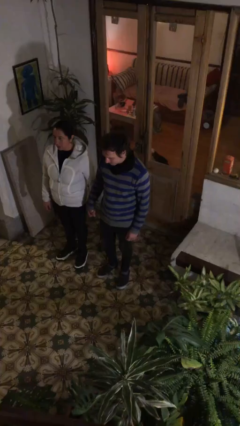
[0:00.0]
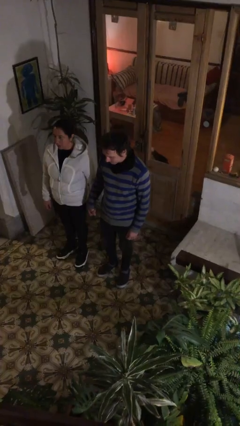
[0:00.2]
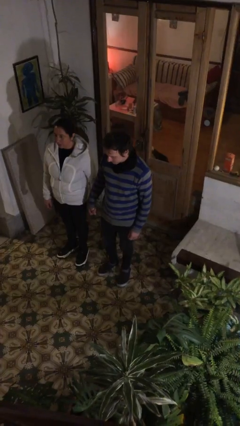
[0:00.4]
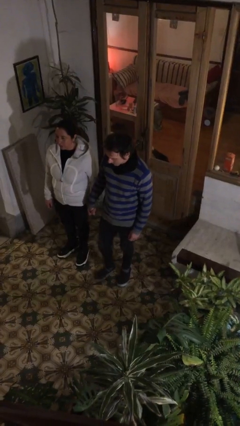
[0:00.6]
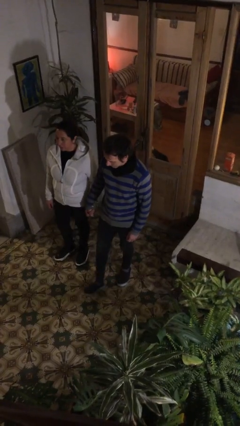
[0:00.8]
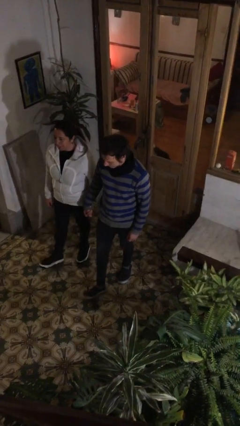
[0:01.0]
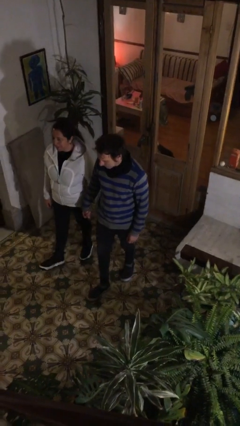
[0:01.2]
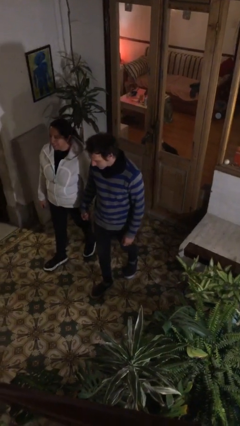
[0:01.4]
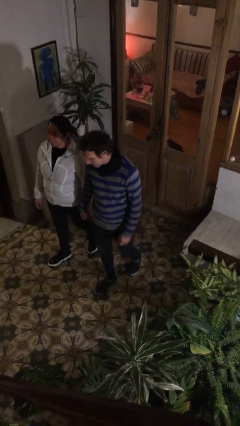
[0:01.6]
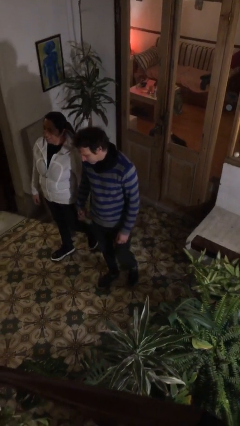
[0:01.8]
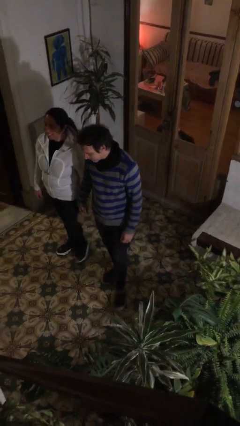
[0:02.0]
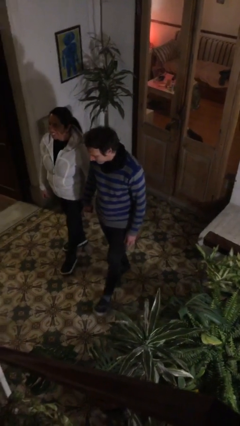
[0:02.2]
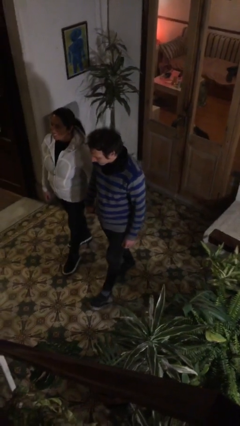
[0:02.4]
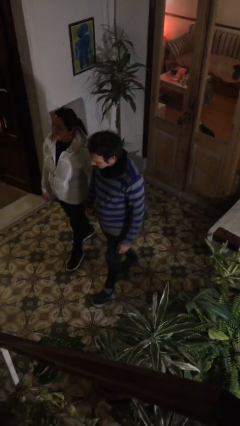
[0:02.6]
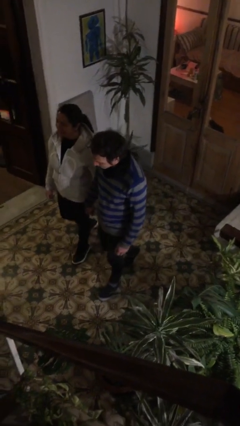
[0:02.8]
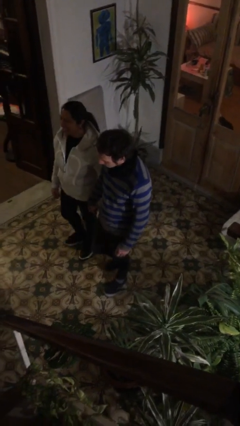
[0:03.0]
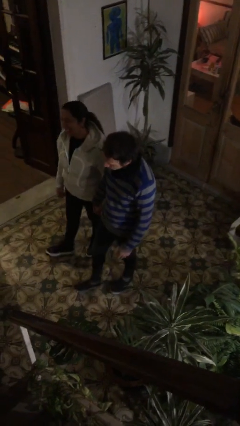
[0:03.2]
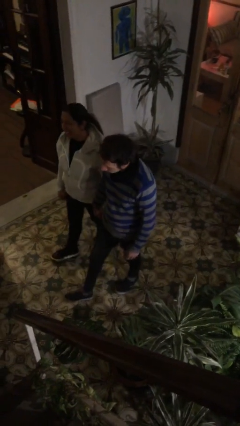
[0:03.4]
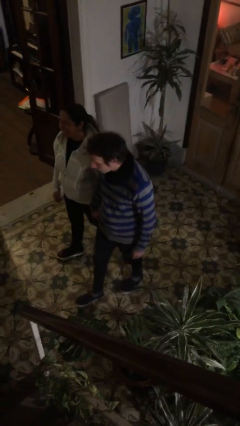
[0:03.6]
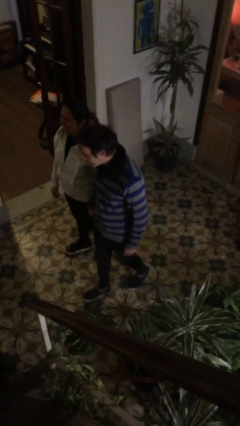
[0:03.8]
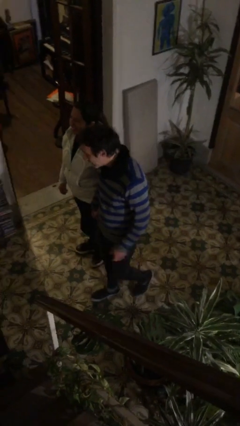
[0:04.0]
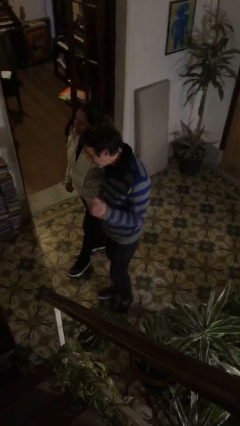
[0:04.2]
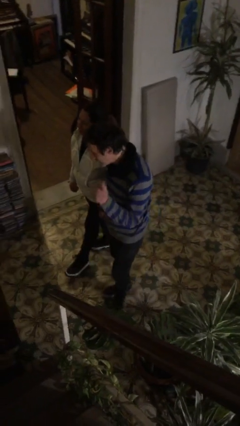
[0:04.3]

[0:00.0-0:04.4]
person holds hand

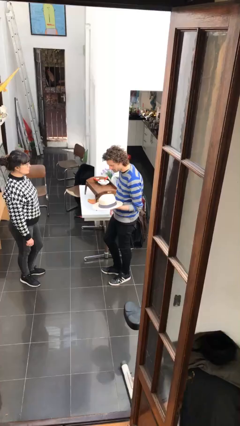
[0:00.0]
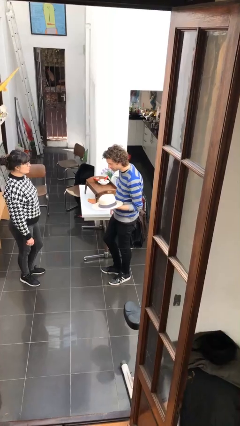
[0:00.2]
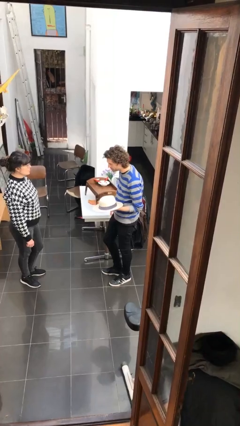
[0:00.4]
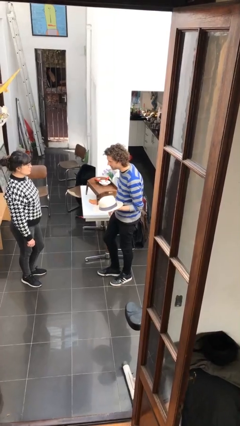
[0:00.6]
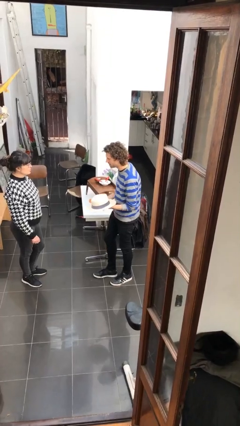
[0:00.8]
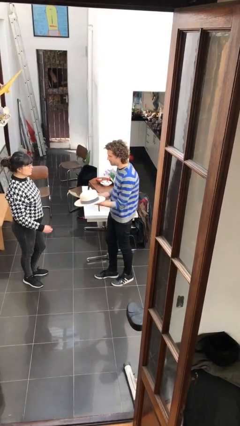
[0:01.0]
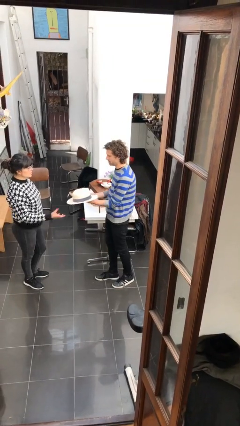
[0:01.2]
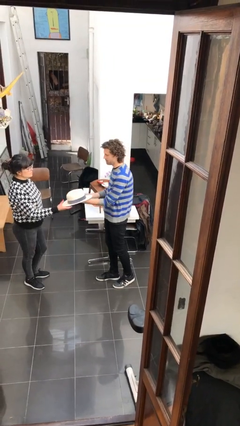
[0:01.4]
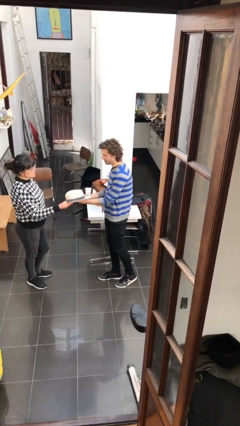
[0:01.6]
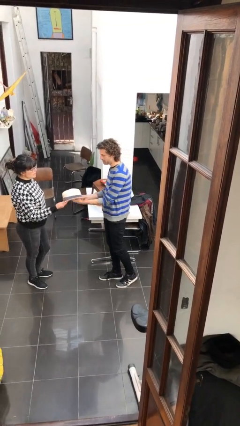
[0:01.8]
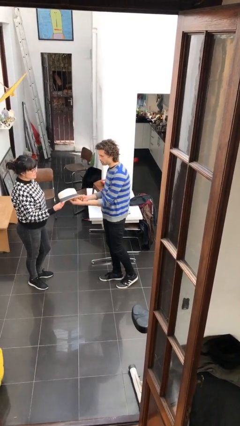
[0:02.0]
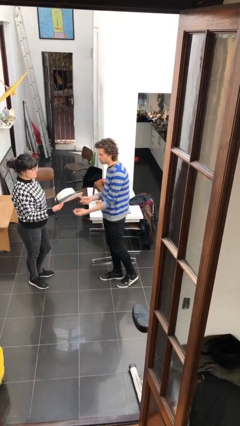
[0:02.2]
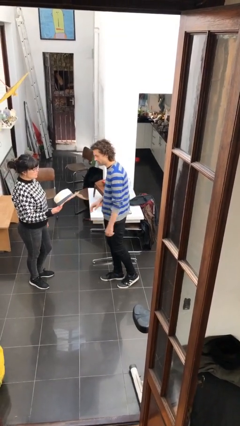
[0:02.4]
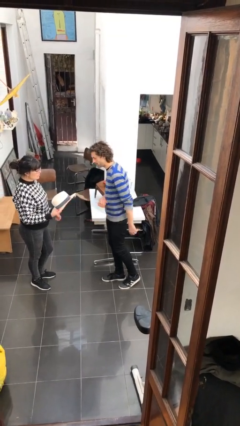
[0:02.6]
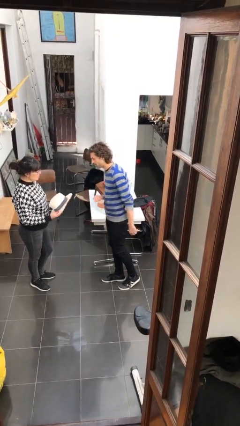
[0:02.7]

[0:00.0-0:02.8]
person transfers object to person

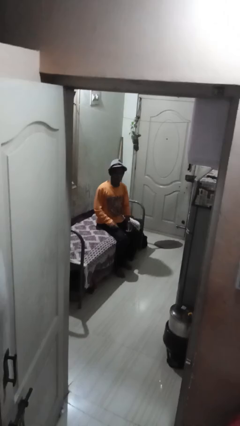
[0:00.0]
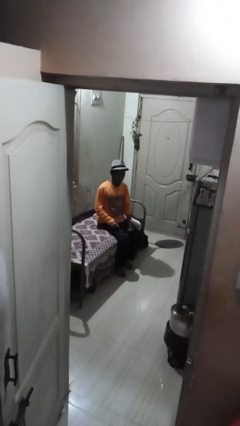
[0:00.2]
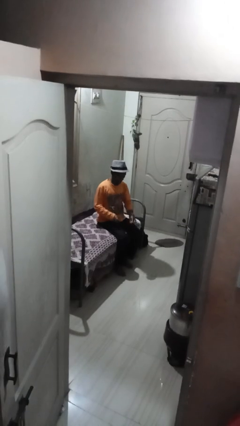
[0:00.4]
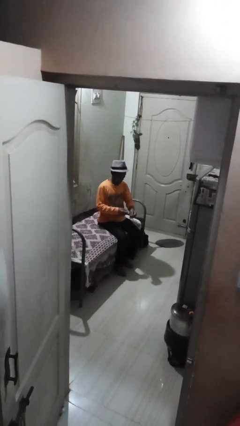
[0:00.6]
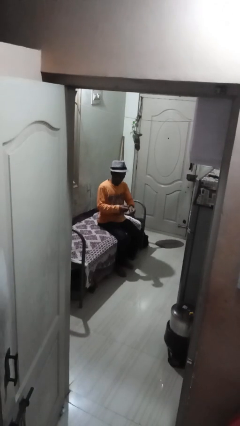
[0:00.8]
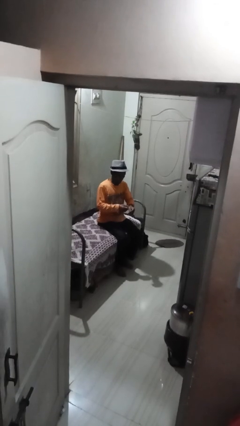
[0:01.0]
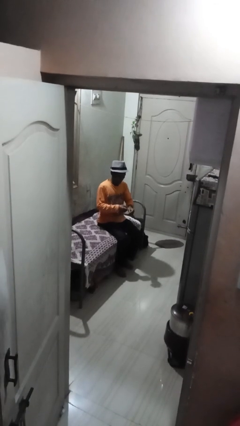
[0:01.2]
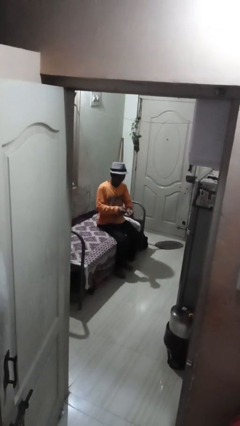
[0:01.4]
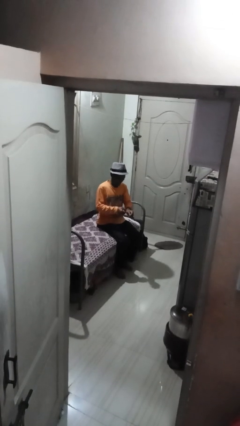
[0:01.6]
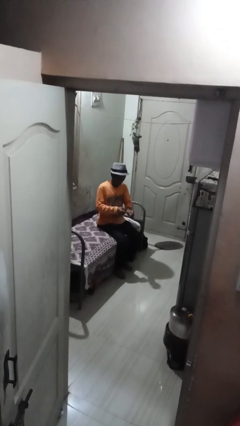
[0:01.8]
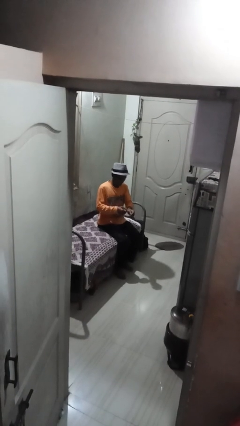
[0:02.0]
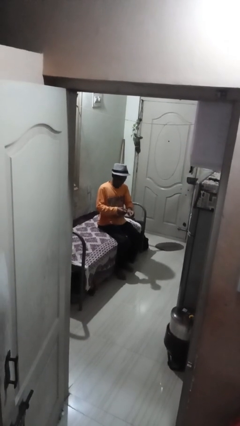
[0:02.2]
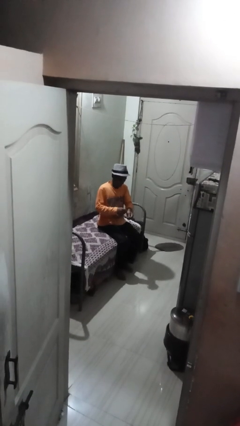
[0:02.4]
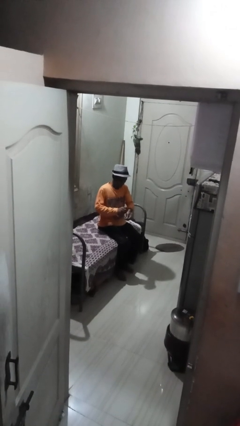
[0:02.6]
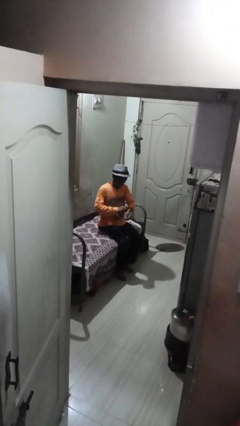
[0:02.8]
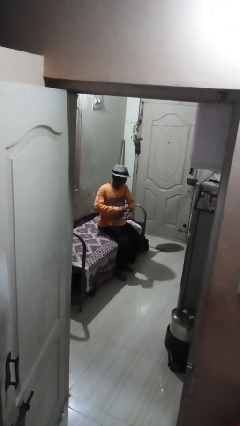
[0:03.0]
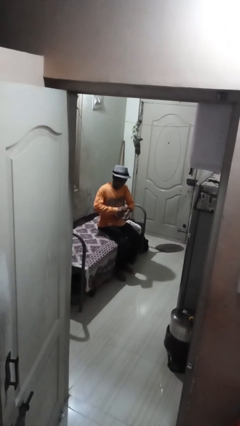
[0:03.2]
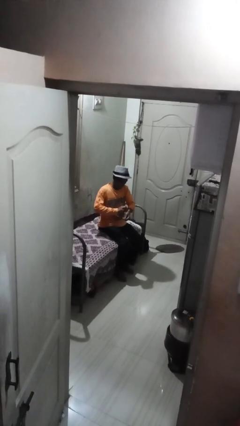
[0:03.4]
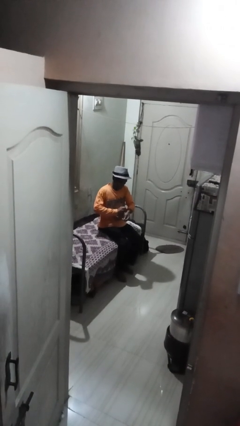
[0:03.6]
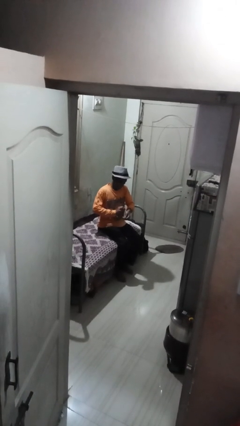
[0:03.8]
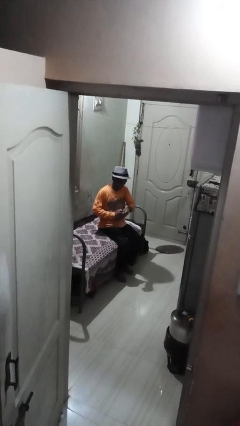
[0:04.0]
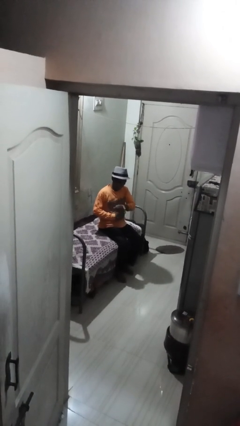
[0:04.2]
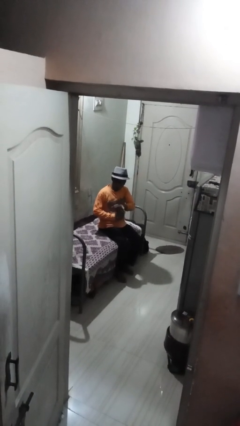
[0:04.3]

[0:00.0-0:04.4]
person takes off wristwatch

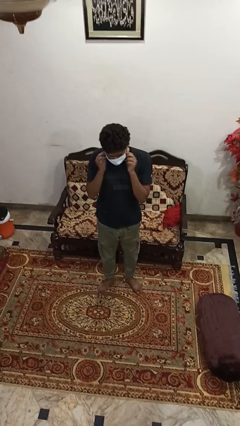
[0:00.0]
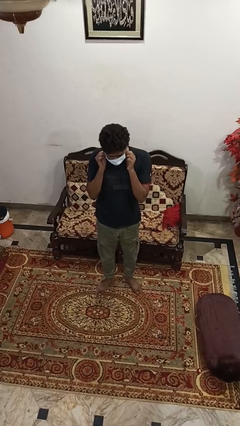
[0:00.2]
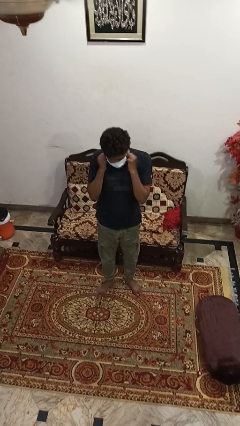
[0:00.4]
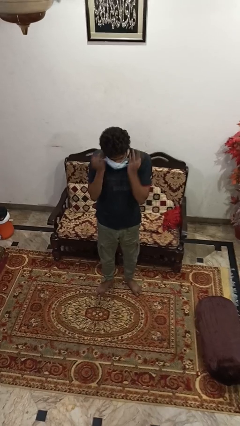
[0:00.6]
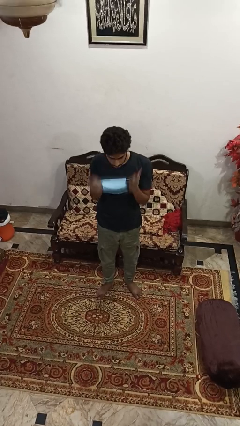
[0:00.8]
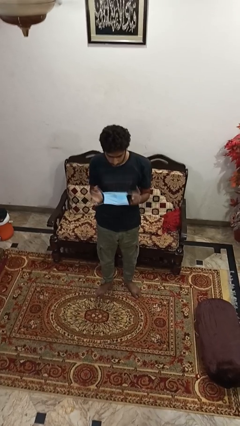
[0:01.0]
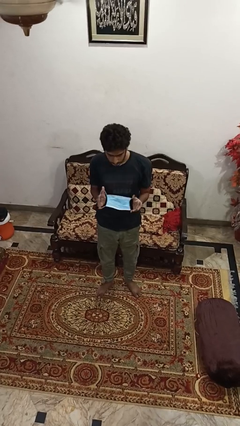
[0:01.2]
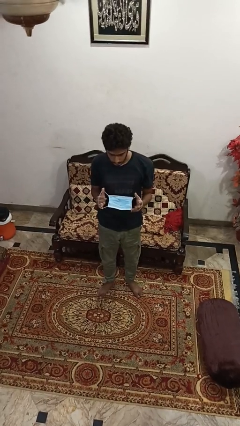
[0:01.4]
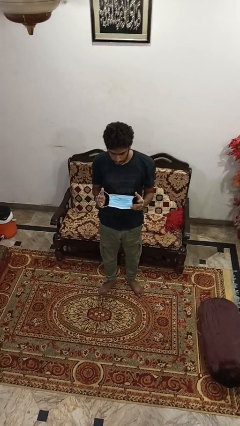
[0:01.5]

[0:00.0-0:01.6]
person takes off facemask

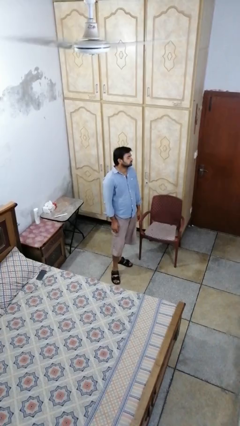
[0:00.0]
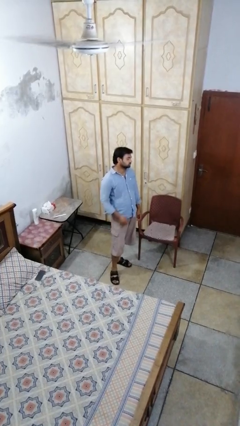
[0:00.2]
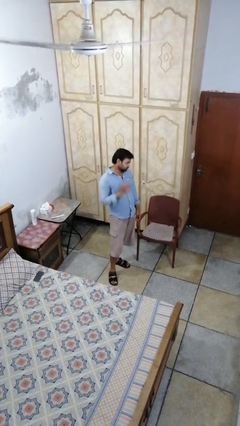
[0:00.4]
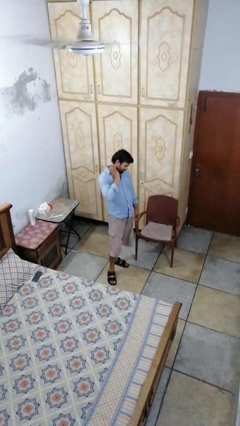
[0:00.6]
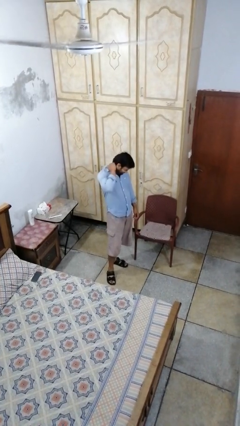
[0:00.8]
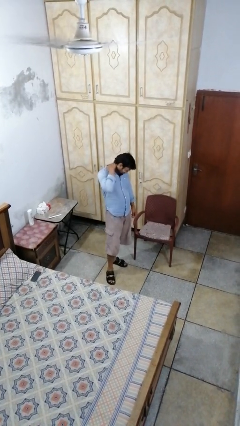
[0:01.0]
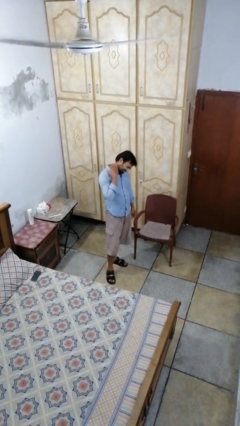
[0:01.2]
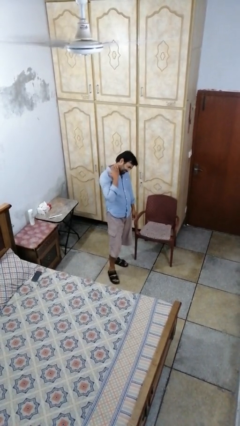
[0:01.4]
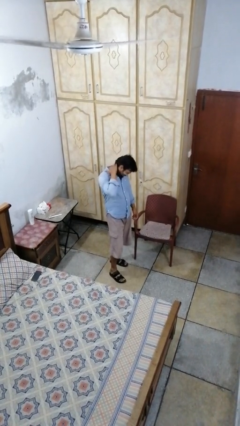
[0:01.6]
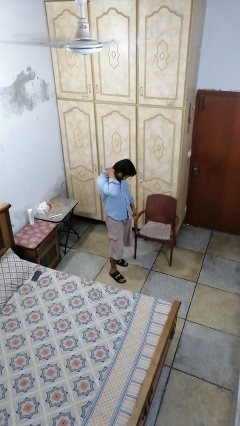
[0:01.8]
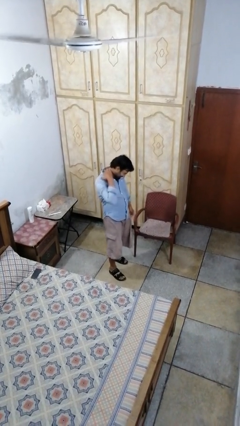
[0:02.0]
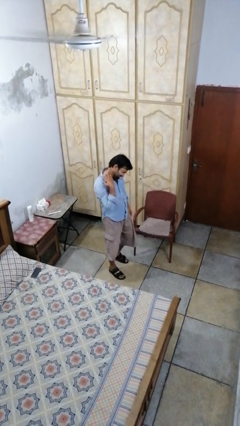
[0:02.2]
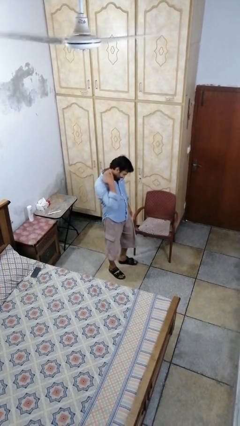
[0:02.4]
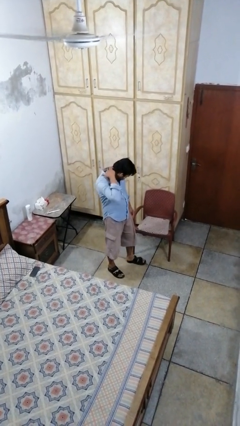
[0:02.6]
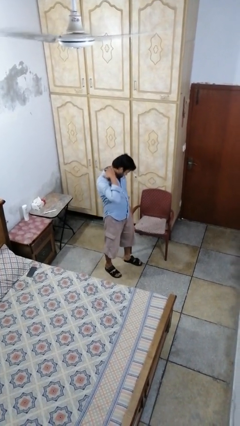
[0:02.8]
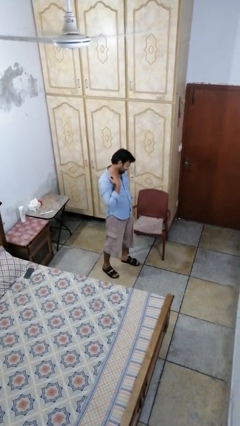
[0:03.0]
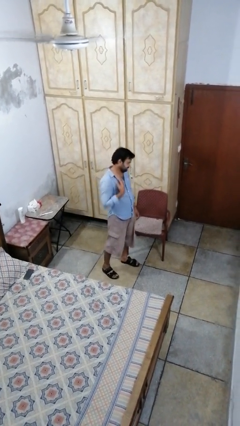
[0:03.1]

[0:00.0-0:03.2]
person rubs neck

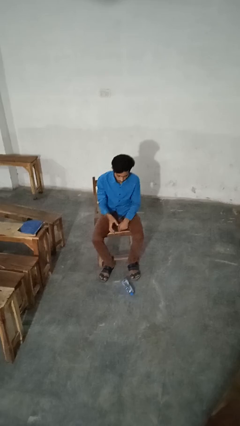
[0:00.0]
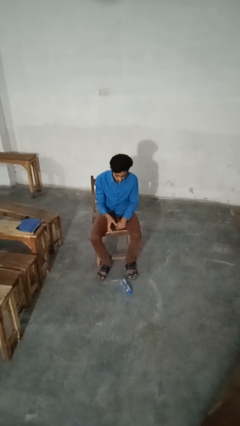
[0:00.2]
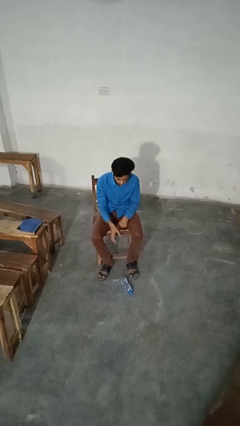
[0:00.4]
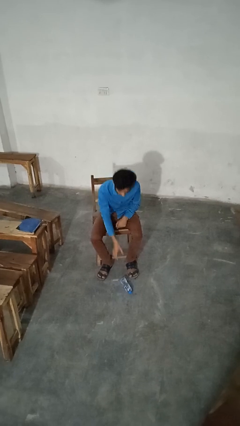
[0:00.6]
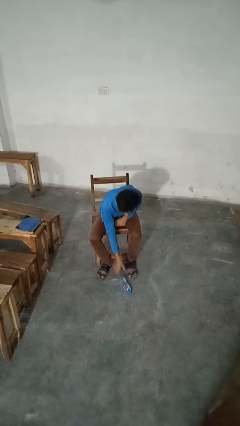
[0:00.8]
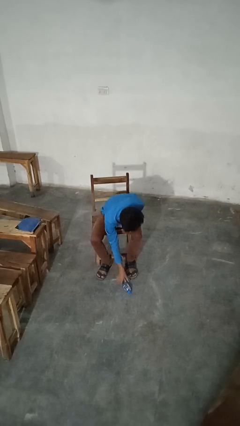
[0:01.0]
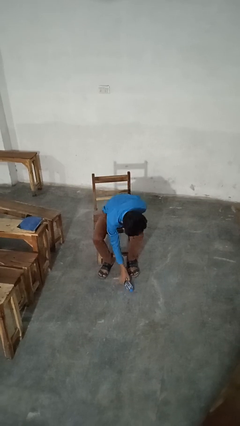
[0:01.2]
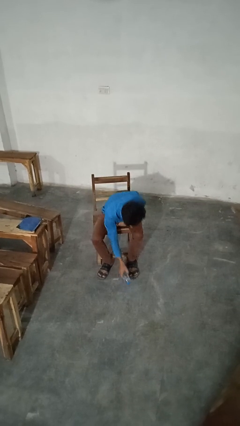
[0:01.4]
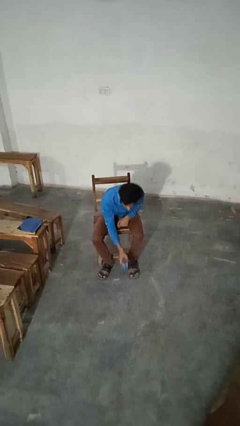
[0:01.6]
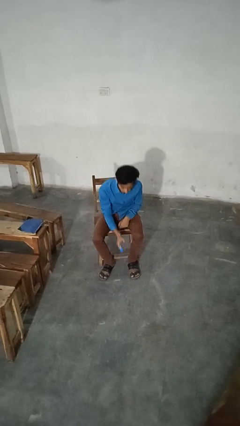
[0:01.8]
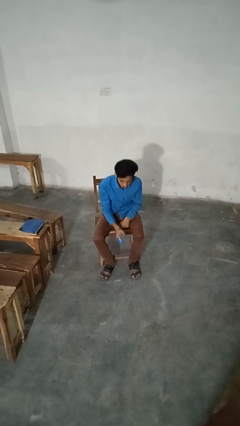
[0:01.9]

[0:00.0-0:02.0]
person picks up object from floor
